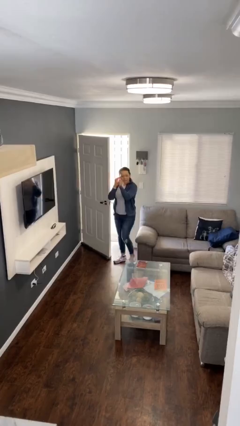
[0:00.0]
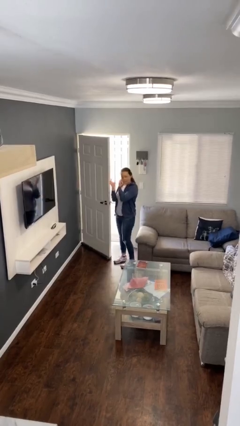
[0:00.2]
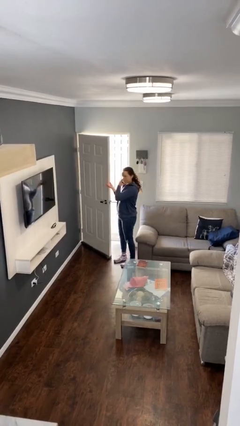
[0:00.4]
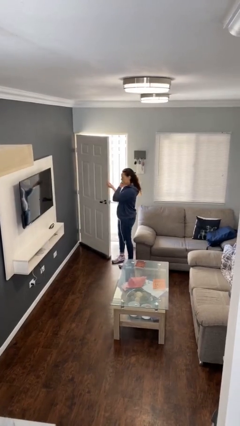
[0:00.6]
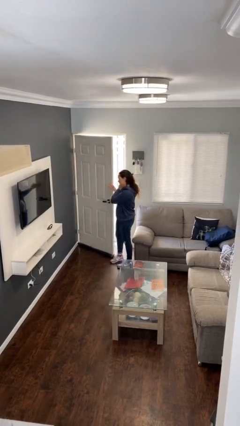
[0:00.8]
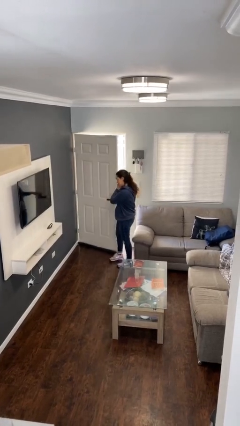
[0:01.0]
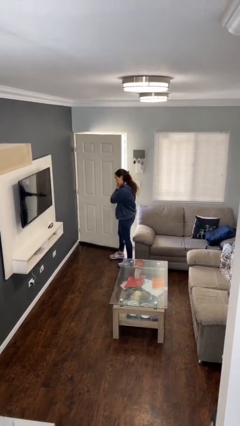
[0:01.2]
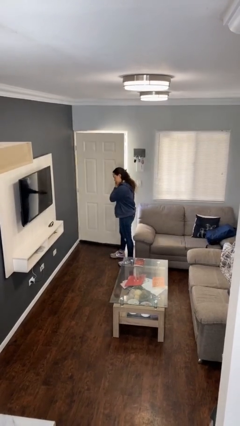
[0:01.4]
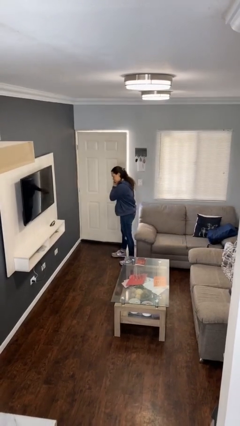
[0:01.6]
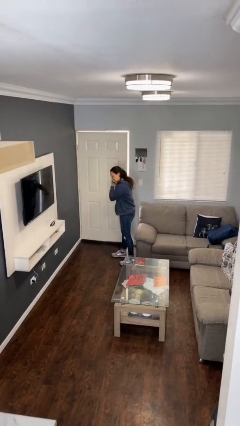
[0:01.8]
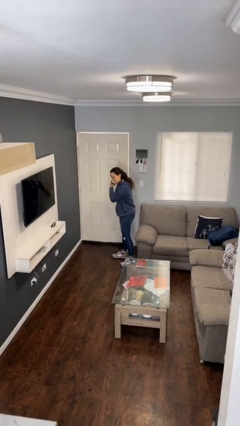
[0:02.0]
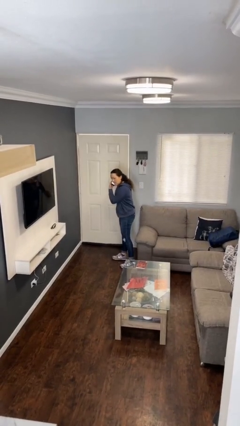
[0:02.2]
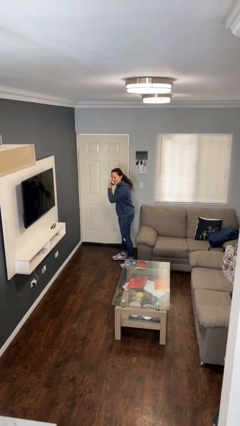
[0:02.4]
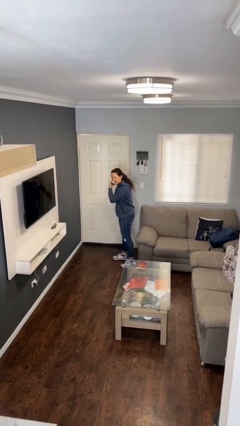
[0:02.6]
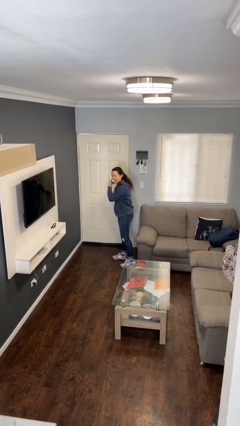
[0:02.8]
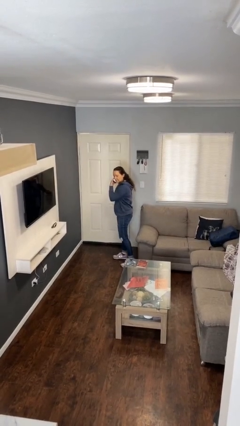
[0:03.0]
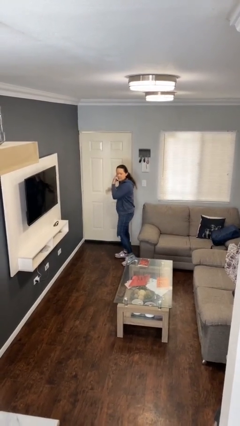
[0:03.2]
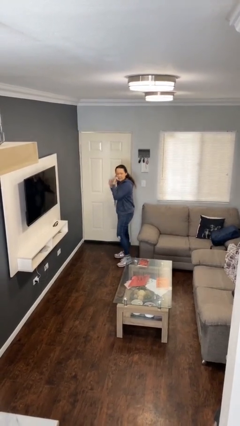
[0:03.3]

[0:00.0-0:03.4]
person closes facility door

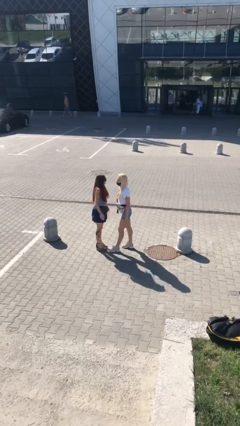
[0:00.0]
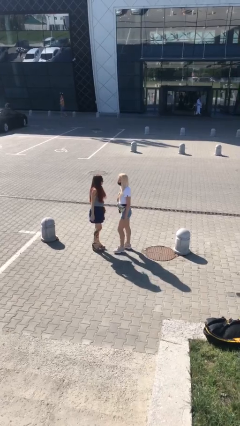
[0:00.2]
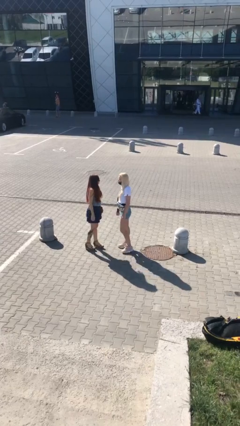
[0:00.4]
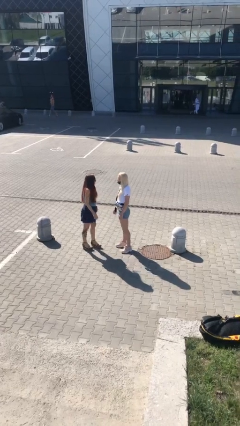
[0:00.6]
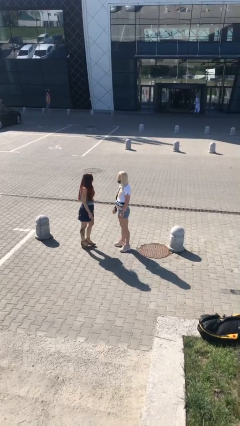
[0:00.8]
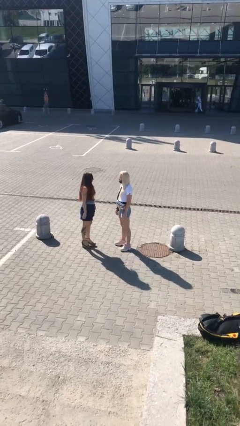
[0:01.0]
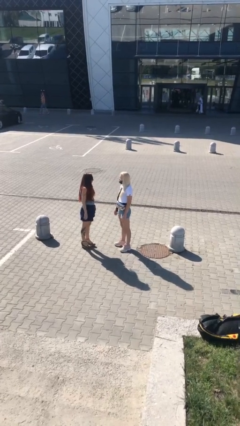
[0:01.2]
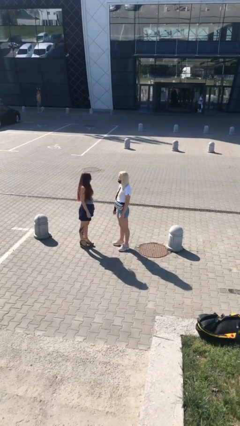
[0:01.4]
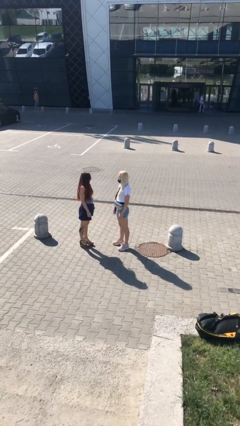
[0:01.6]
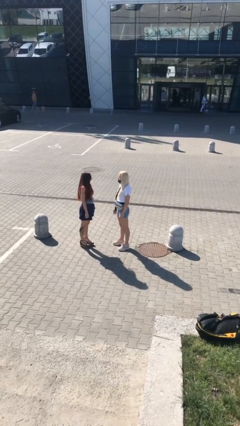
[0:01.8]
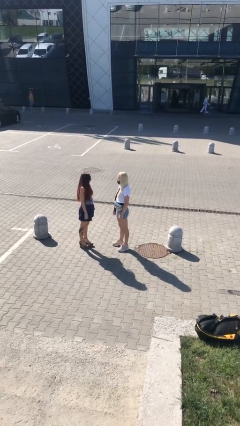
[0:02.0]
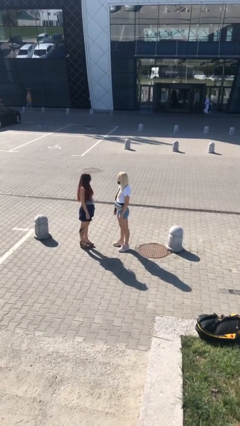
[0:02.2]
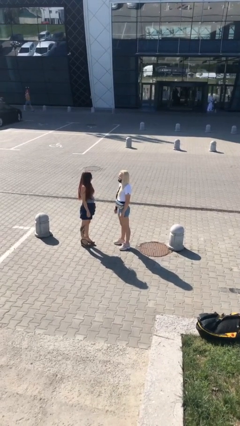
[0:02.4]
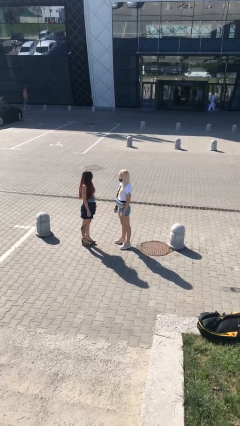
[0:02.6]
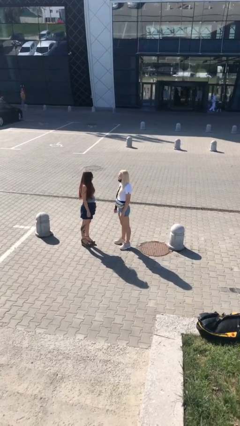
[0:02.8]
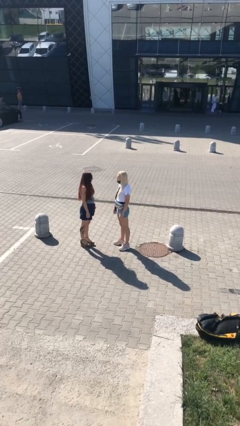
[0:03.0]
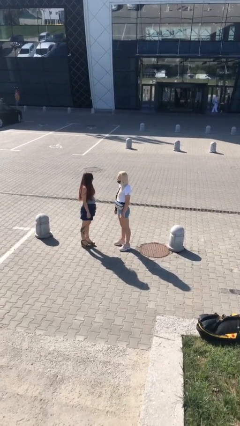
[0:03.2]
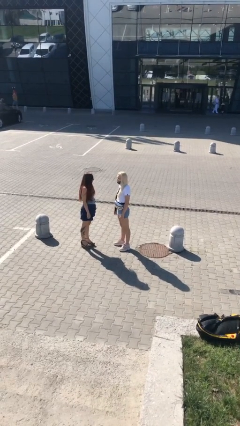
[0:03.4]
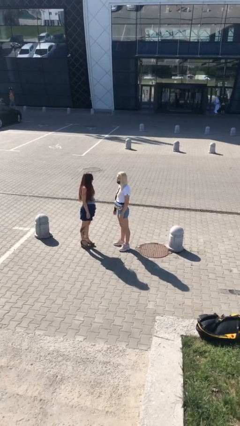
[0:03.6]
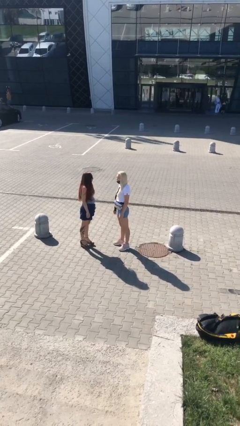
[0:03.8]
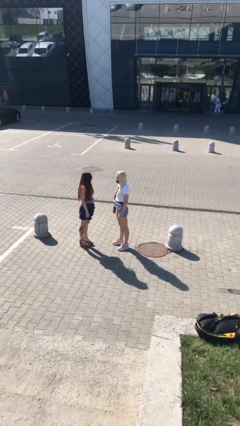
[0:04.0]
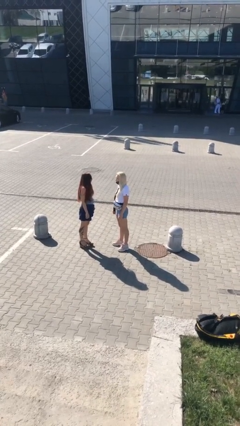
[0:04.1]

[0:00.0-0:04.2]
person talks to person

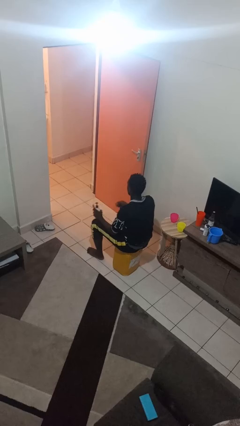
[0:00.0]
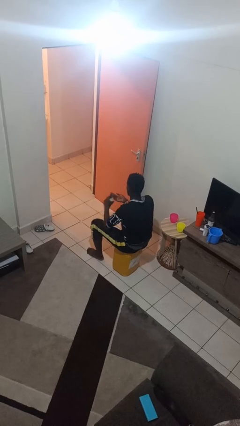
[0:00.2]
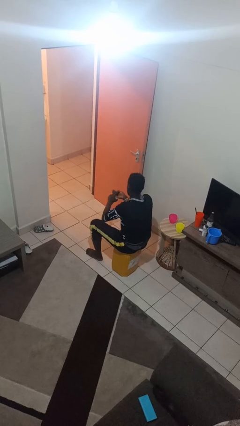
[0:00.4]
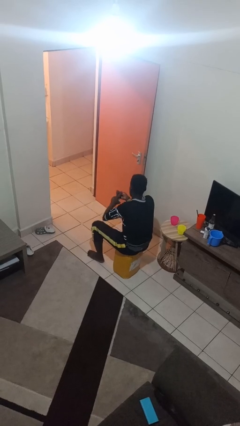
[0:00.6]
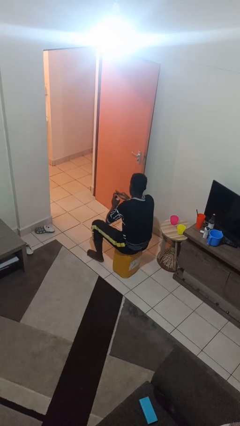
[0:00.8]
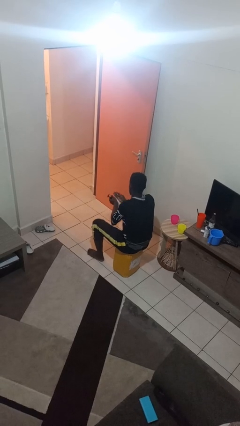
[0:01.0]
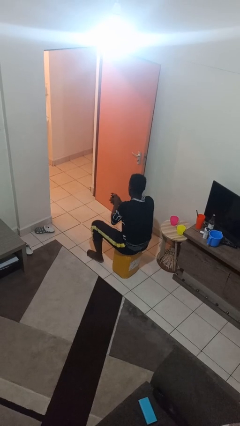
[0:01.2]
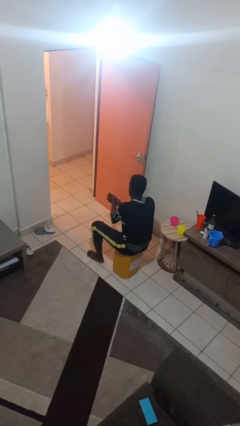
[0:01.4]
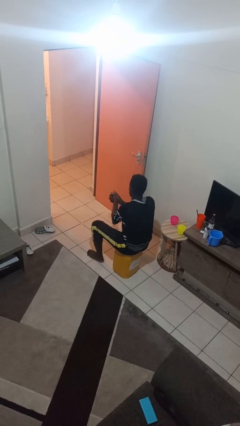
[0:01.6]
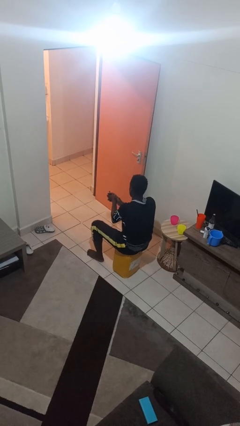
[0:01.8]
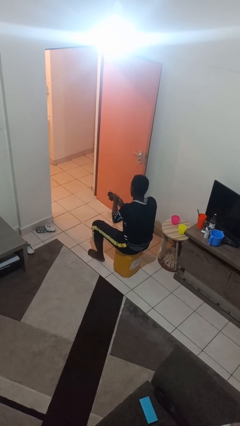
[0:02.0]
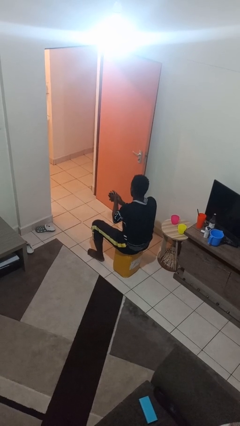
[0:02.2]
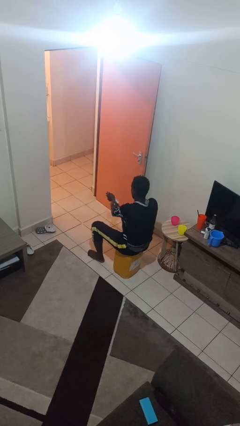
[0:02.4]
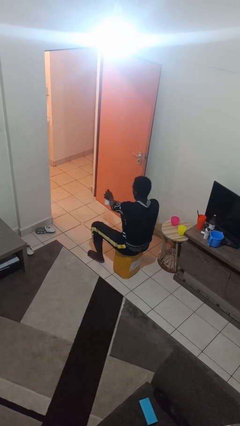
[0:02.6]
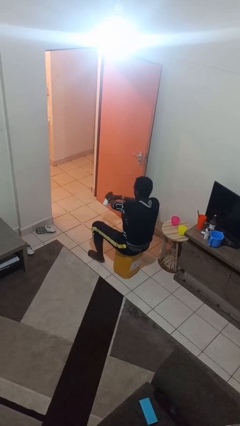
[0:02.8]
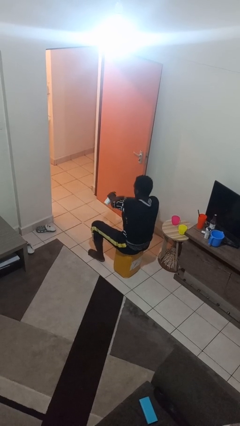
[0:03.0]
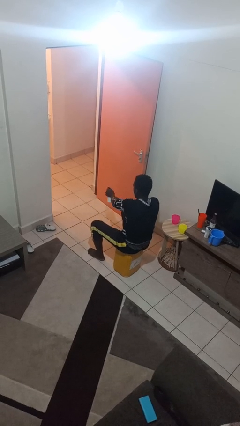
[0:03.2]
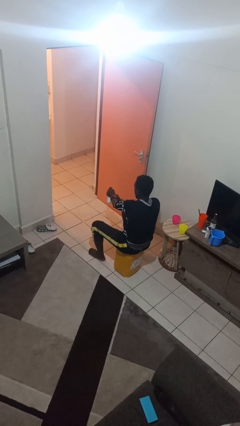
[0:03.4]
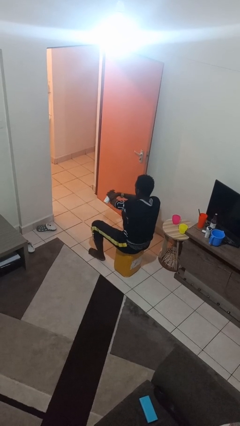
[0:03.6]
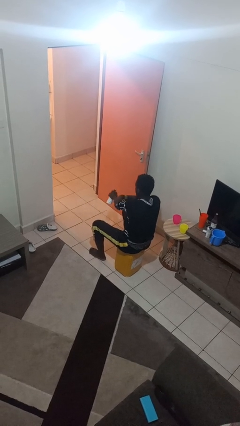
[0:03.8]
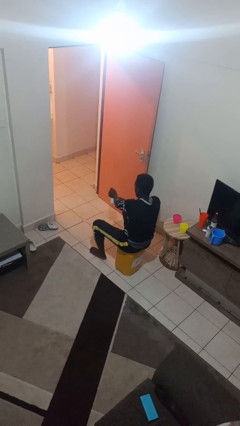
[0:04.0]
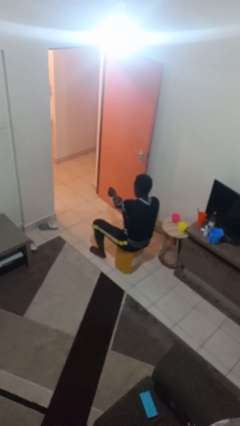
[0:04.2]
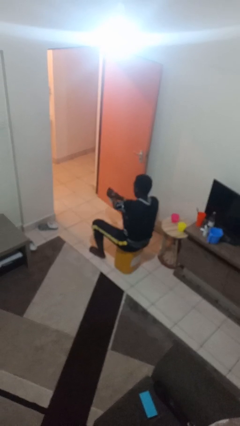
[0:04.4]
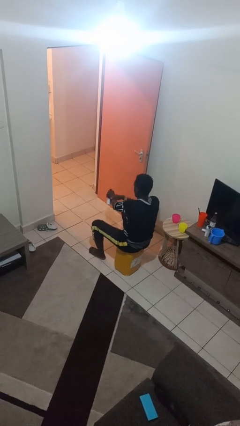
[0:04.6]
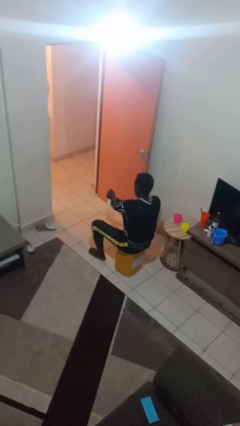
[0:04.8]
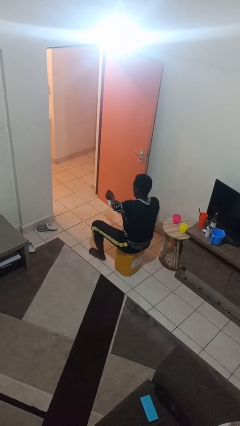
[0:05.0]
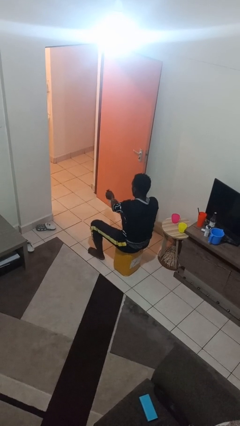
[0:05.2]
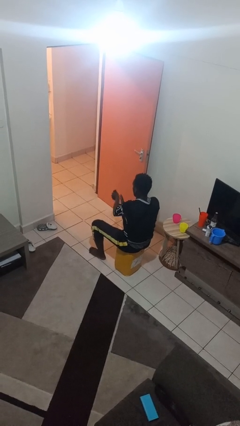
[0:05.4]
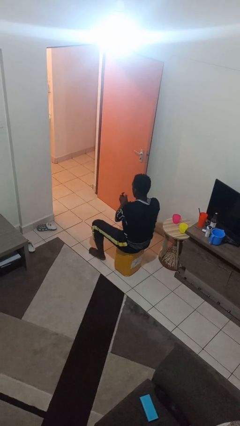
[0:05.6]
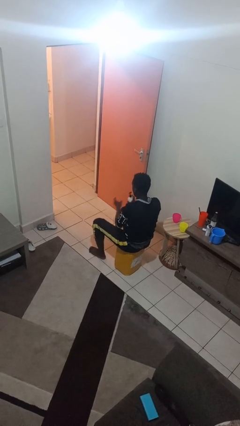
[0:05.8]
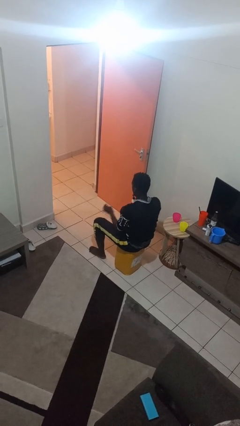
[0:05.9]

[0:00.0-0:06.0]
person applies sunscreen

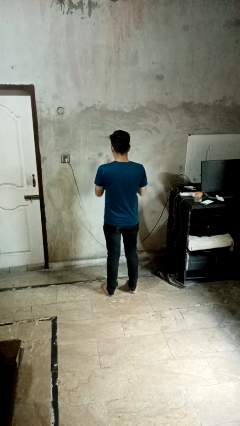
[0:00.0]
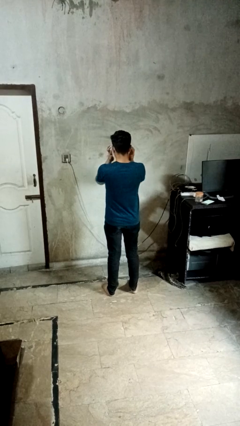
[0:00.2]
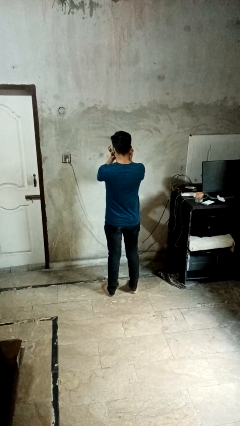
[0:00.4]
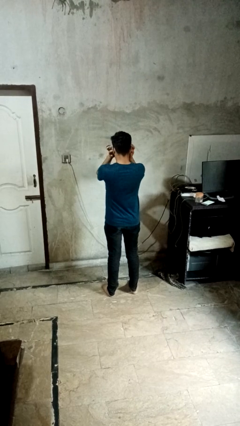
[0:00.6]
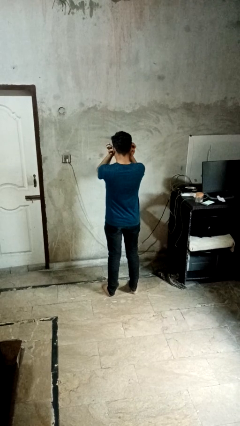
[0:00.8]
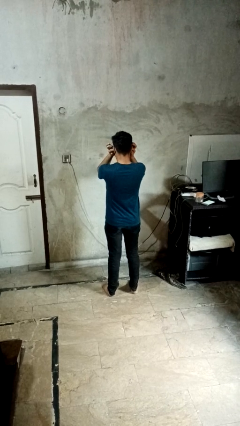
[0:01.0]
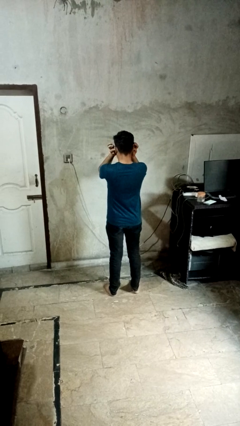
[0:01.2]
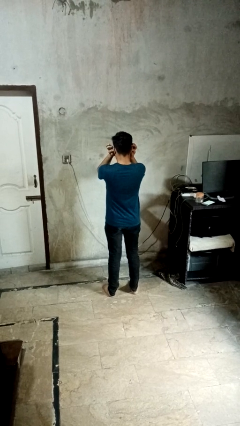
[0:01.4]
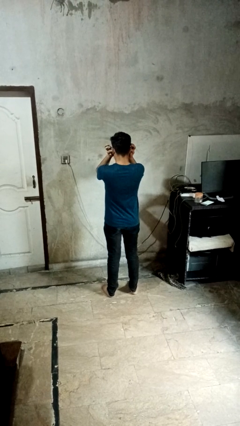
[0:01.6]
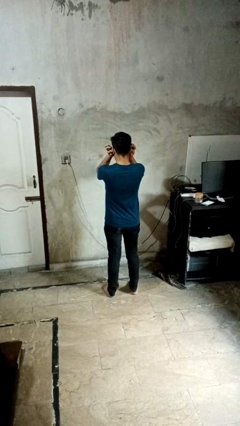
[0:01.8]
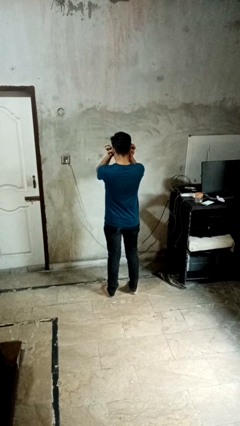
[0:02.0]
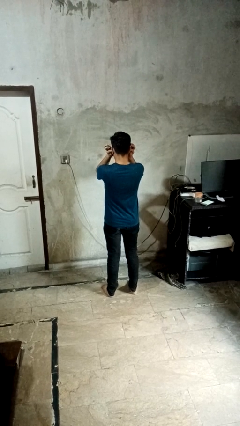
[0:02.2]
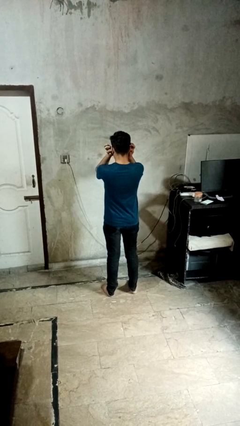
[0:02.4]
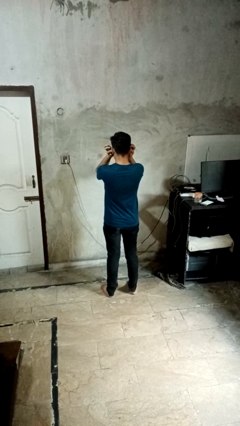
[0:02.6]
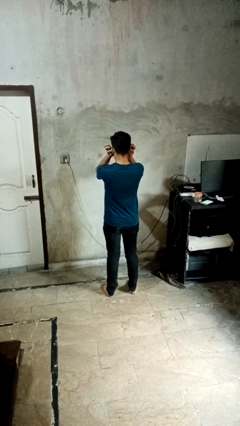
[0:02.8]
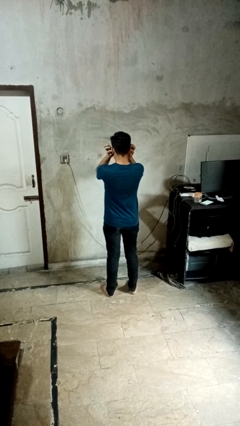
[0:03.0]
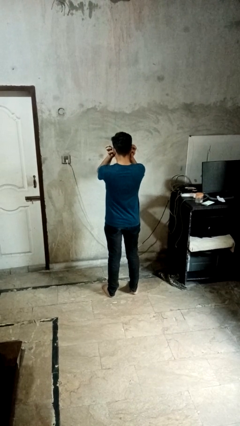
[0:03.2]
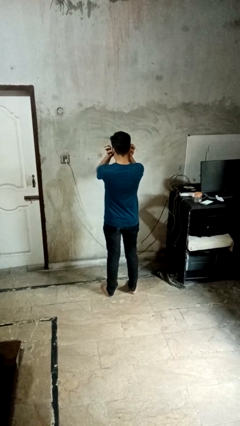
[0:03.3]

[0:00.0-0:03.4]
person puts fingers in ear

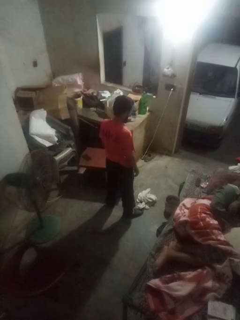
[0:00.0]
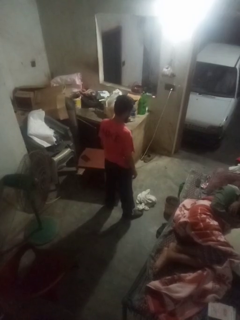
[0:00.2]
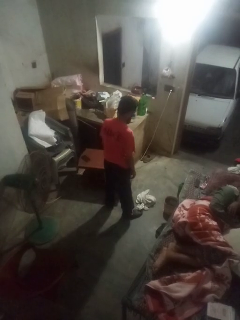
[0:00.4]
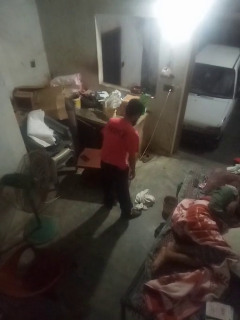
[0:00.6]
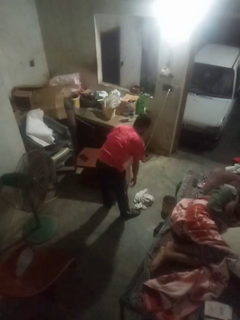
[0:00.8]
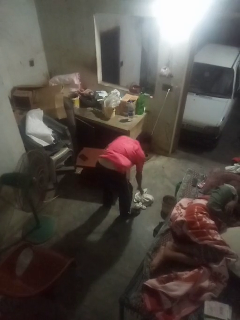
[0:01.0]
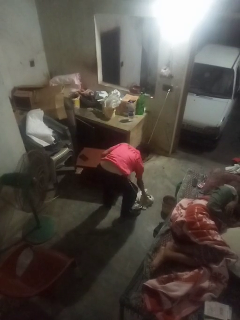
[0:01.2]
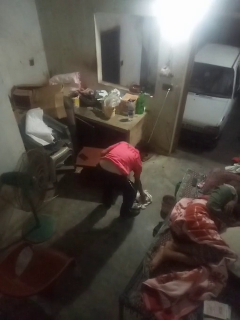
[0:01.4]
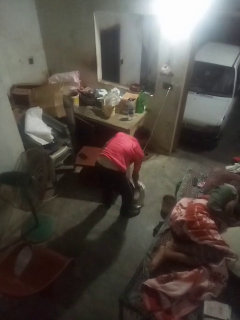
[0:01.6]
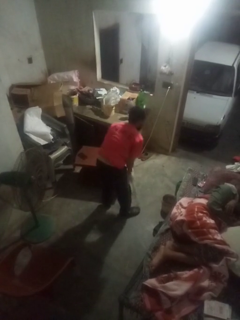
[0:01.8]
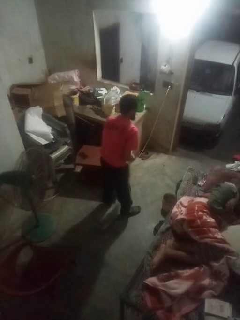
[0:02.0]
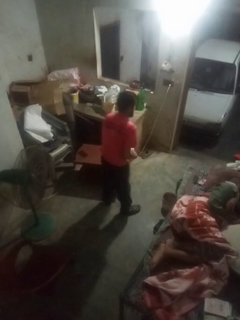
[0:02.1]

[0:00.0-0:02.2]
person picks up object from floor
